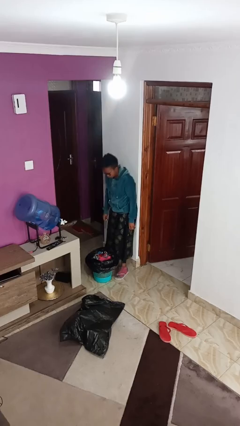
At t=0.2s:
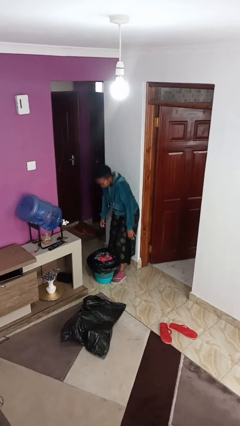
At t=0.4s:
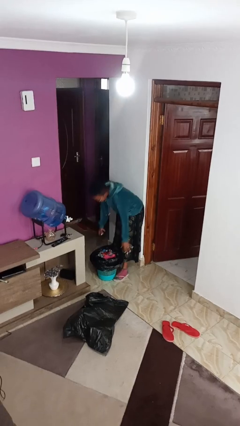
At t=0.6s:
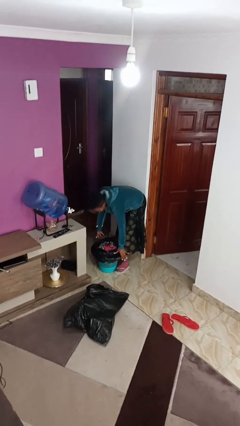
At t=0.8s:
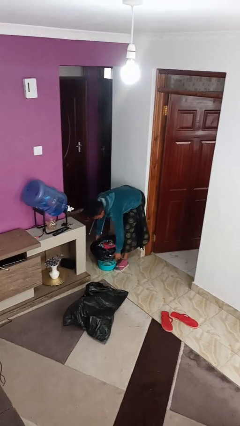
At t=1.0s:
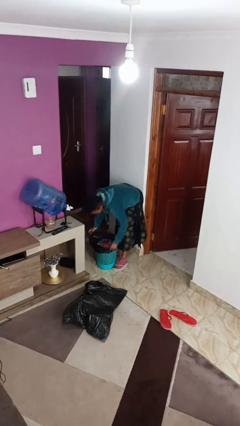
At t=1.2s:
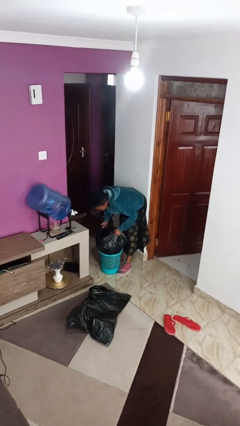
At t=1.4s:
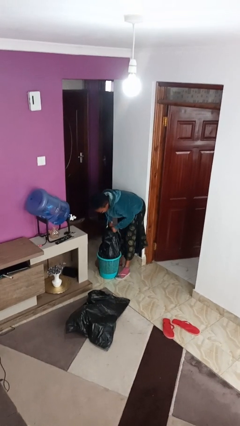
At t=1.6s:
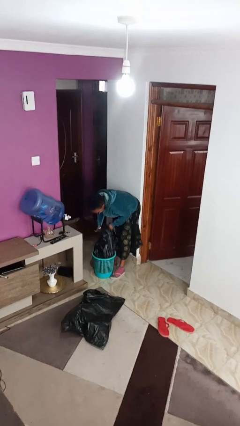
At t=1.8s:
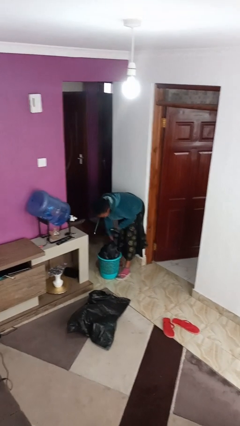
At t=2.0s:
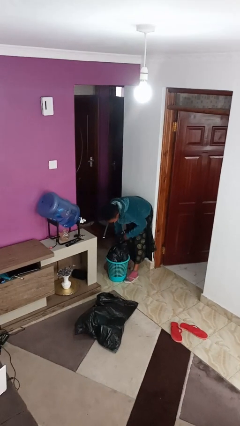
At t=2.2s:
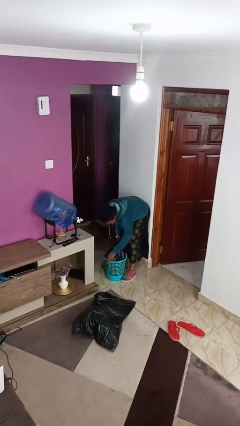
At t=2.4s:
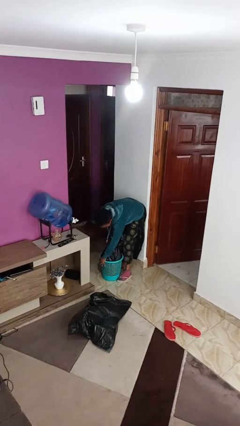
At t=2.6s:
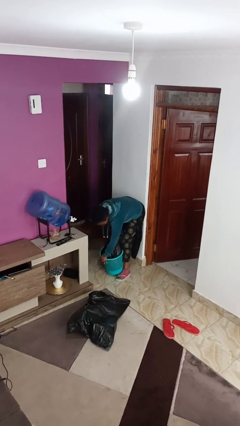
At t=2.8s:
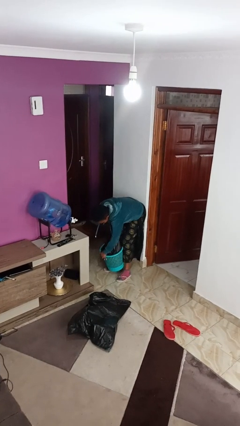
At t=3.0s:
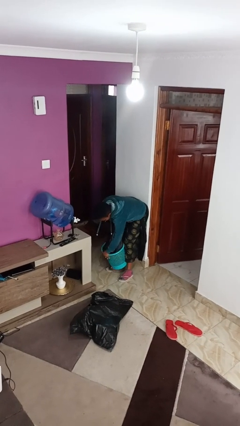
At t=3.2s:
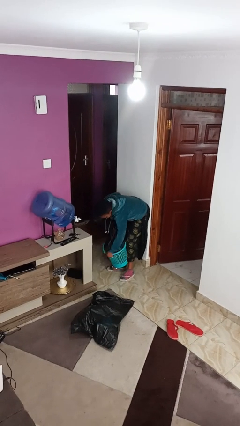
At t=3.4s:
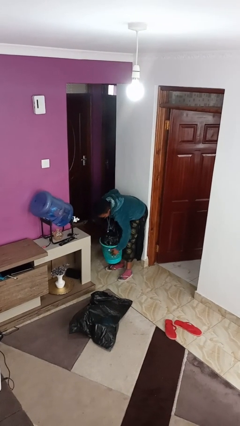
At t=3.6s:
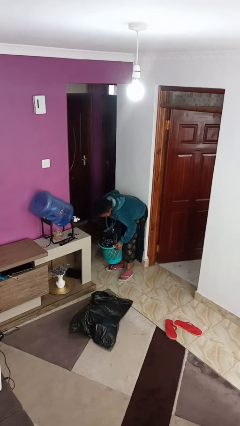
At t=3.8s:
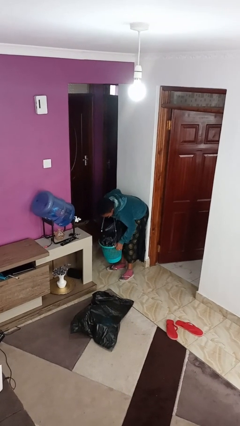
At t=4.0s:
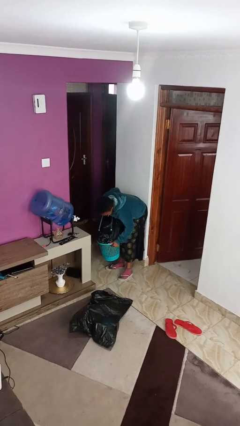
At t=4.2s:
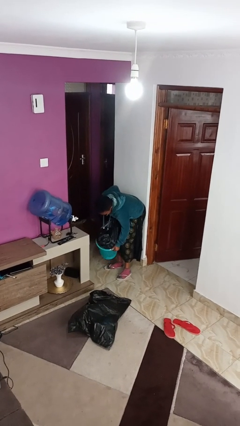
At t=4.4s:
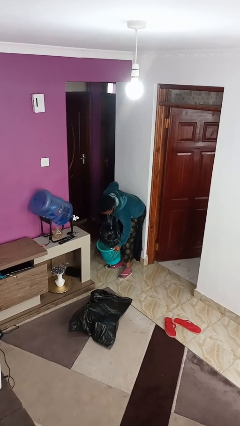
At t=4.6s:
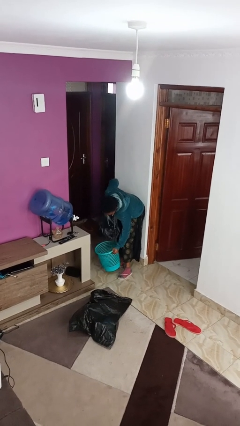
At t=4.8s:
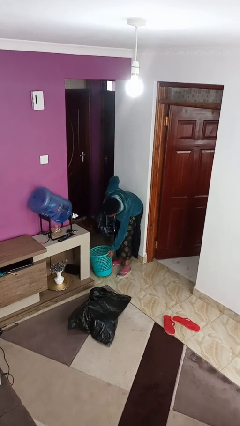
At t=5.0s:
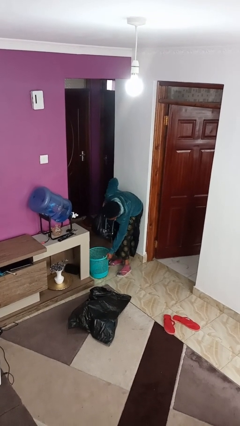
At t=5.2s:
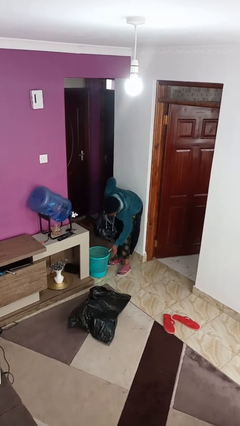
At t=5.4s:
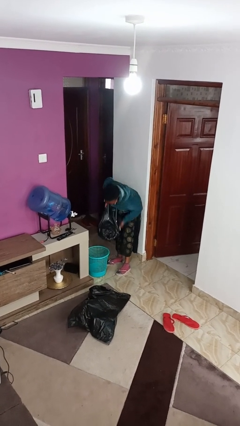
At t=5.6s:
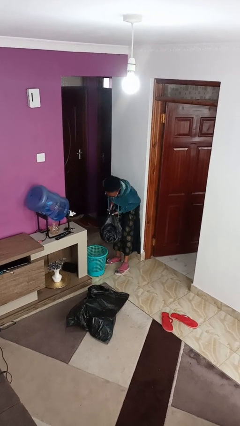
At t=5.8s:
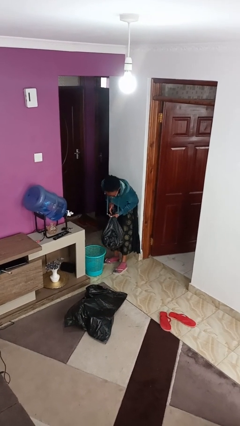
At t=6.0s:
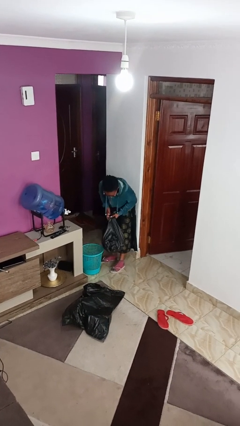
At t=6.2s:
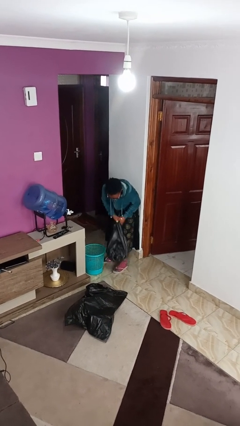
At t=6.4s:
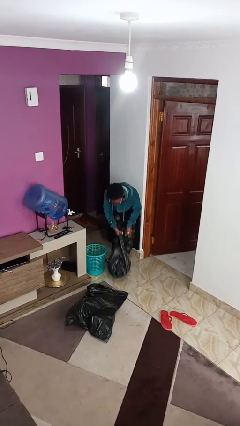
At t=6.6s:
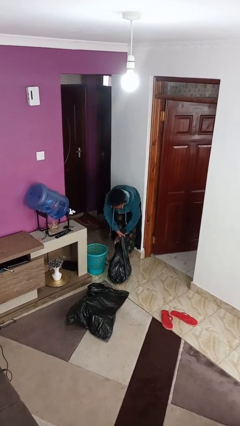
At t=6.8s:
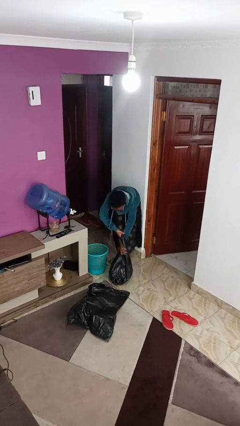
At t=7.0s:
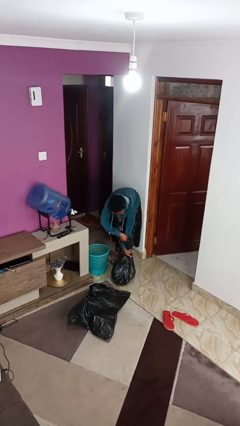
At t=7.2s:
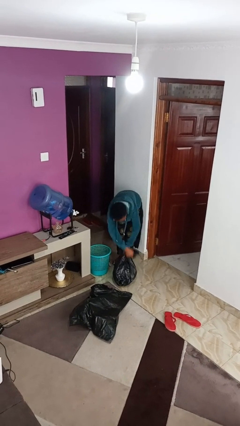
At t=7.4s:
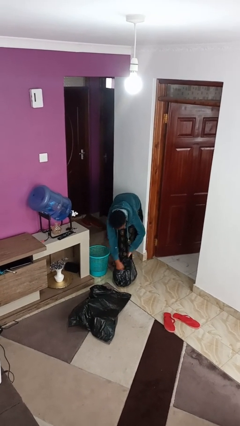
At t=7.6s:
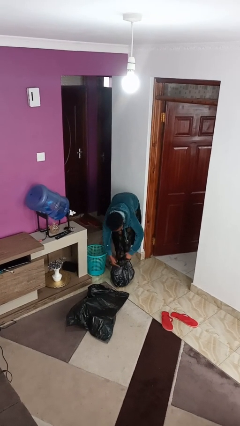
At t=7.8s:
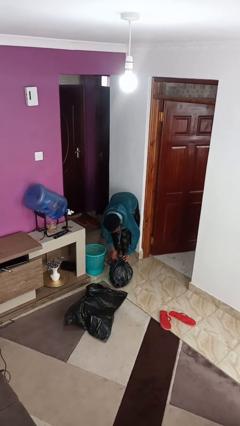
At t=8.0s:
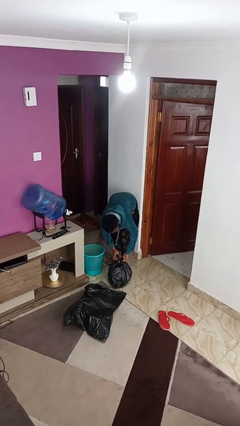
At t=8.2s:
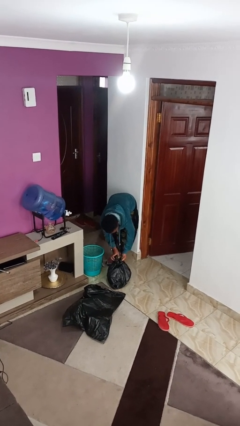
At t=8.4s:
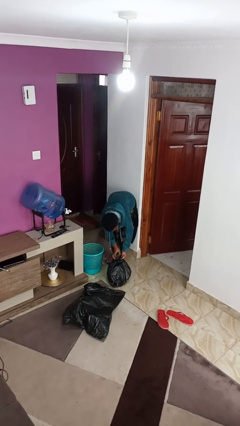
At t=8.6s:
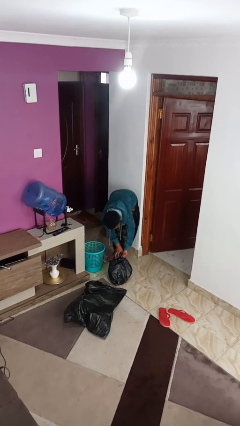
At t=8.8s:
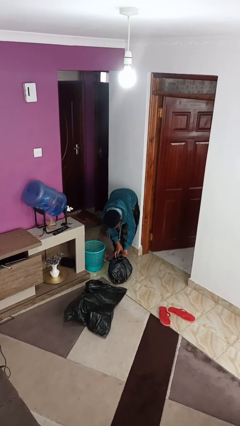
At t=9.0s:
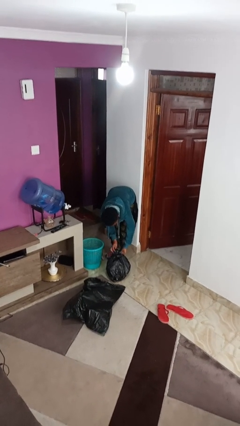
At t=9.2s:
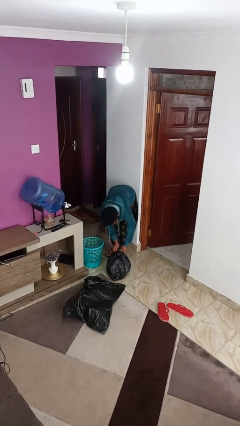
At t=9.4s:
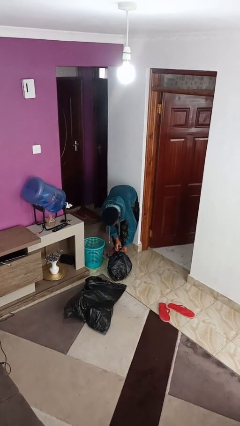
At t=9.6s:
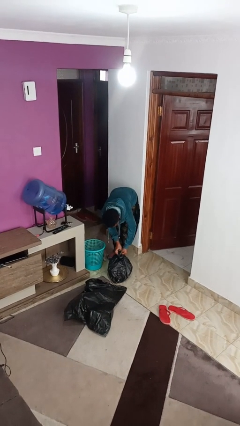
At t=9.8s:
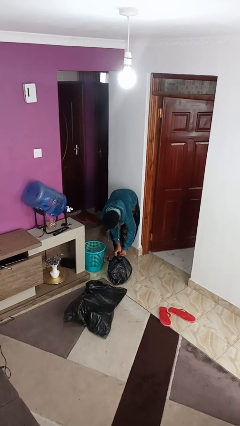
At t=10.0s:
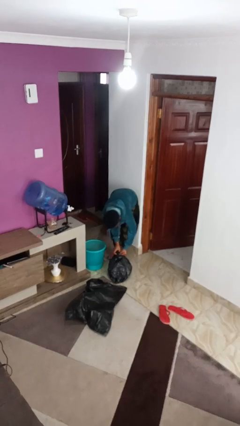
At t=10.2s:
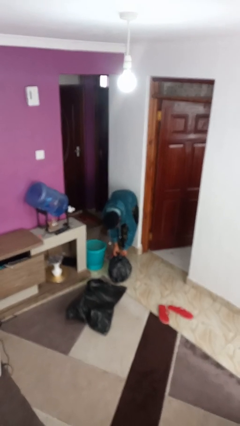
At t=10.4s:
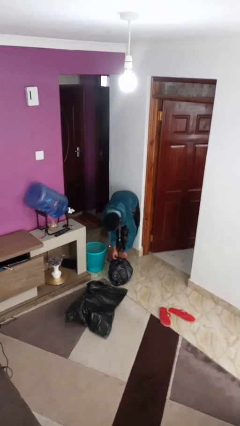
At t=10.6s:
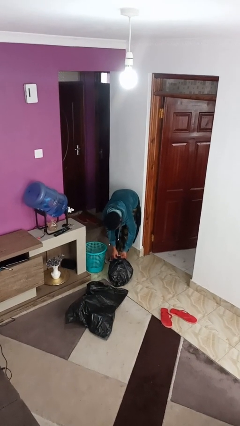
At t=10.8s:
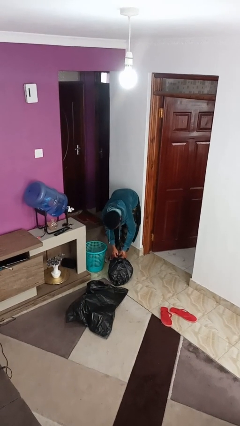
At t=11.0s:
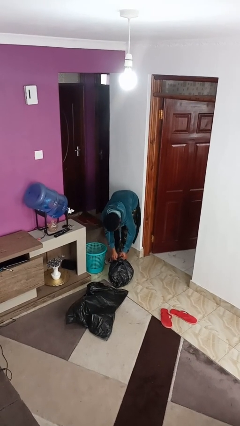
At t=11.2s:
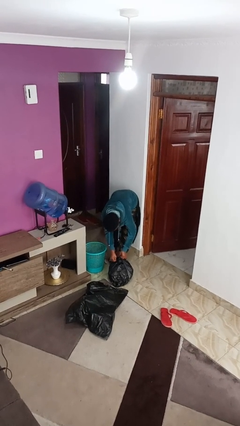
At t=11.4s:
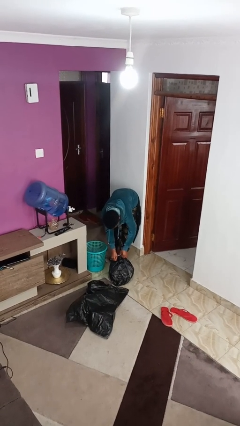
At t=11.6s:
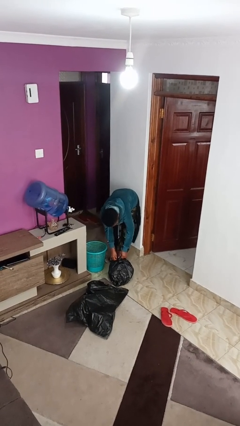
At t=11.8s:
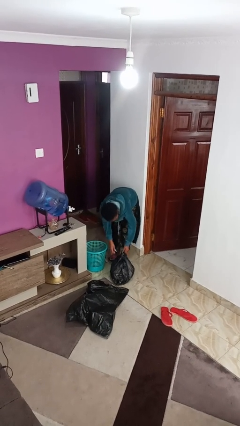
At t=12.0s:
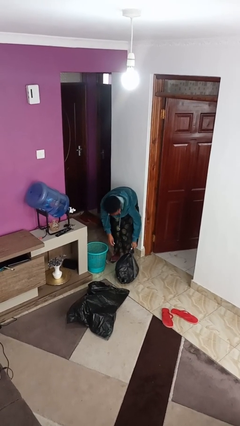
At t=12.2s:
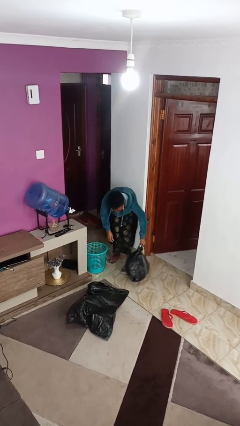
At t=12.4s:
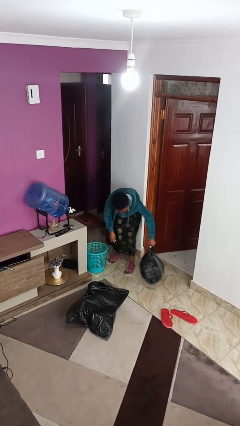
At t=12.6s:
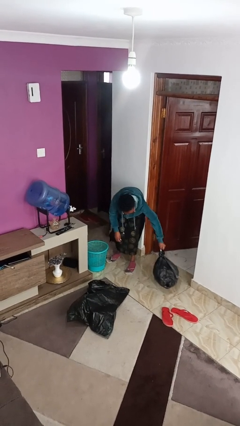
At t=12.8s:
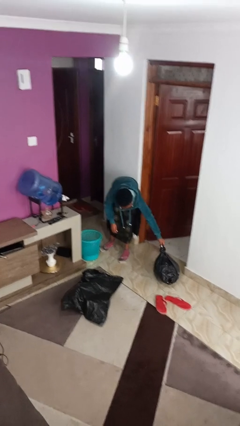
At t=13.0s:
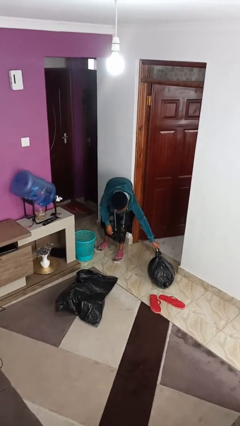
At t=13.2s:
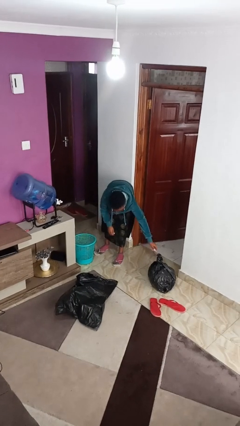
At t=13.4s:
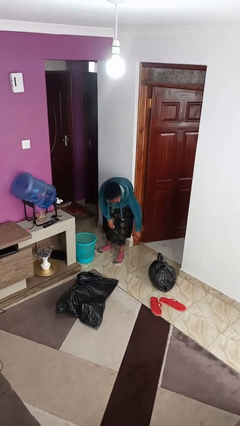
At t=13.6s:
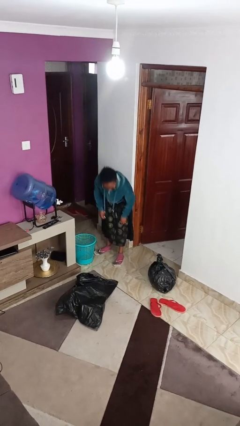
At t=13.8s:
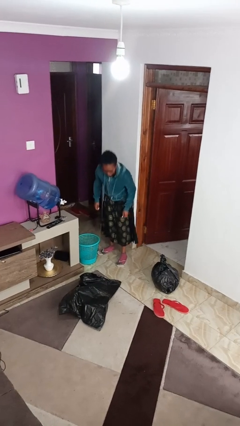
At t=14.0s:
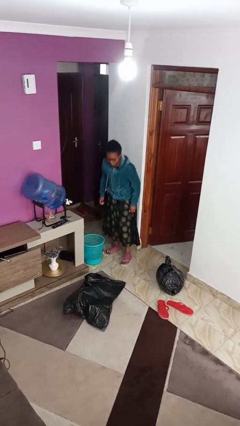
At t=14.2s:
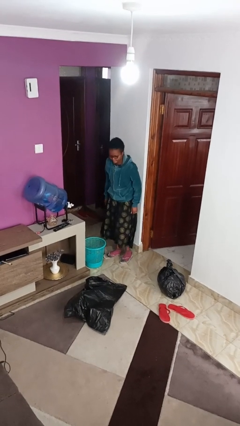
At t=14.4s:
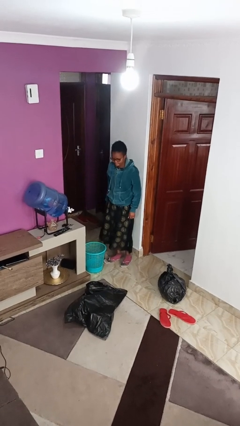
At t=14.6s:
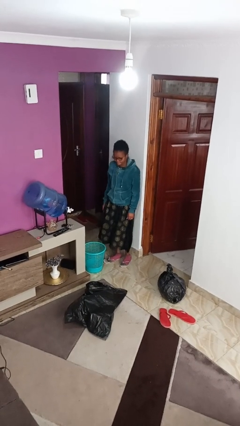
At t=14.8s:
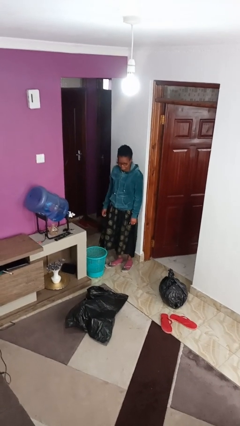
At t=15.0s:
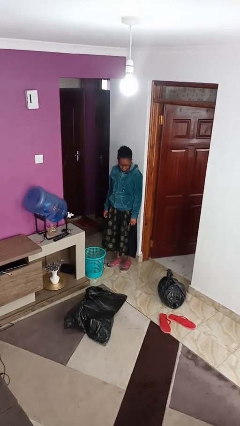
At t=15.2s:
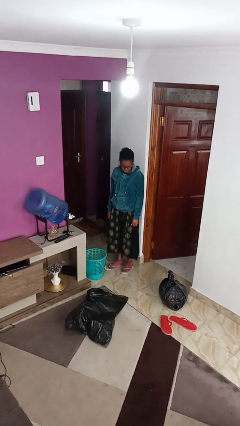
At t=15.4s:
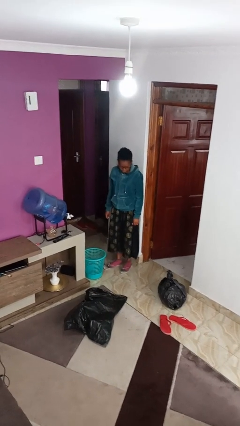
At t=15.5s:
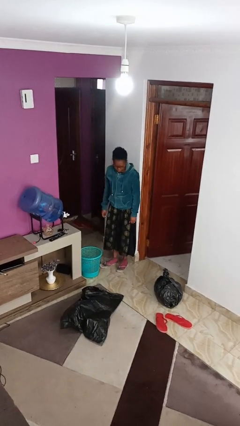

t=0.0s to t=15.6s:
person removes trashbag from trashcan

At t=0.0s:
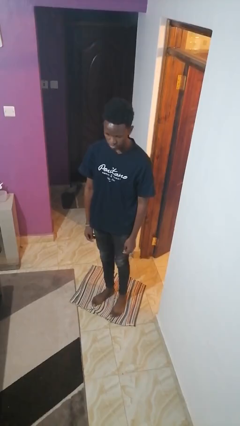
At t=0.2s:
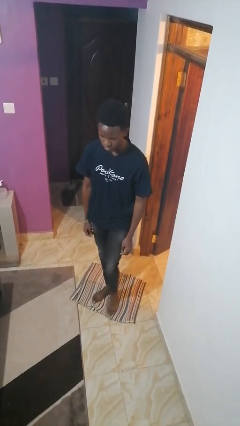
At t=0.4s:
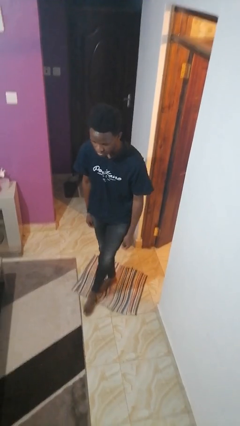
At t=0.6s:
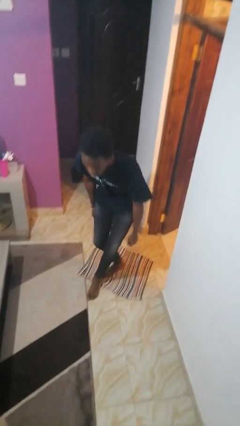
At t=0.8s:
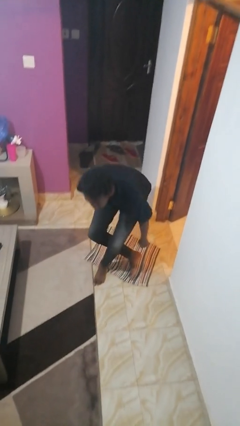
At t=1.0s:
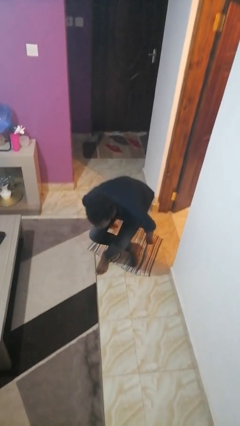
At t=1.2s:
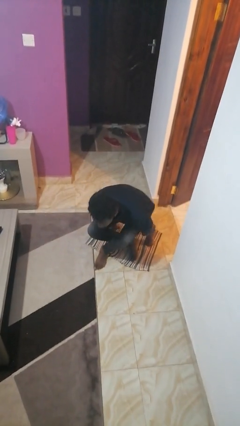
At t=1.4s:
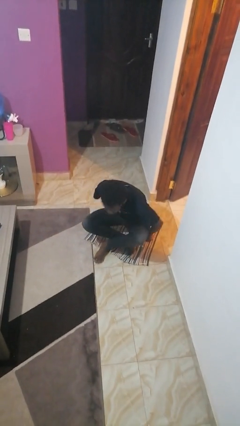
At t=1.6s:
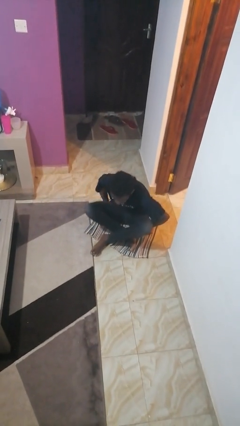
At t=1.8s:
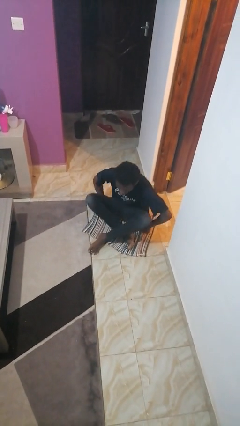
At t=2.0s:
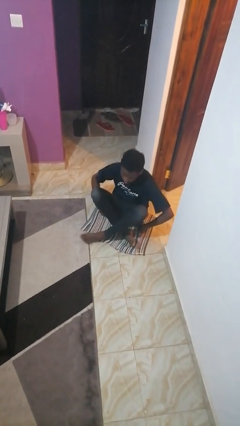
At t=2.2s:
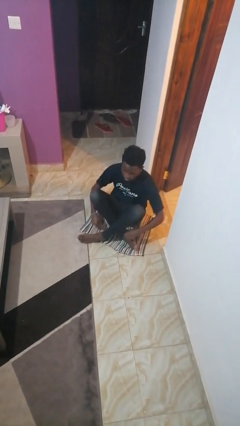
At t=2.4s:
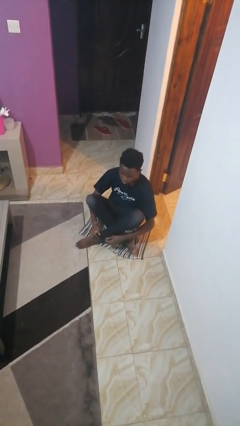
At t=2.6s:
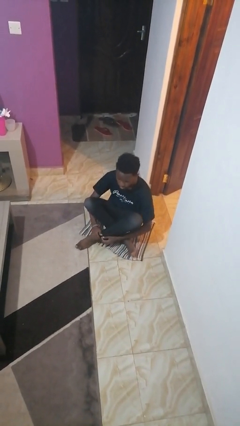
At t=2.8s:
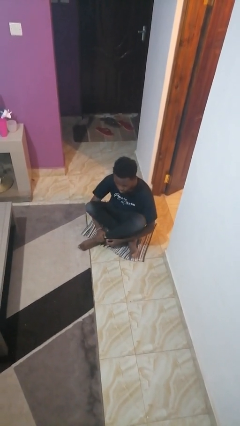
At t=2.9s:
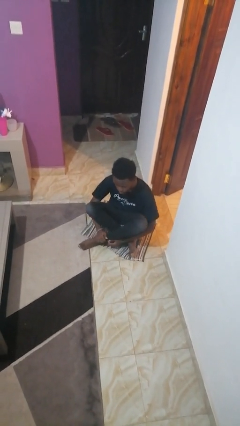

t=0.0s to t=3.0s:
person sits crisscross
